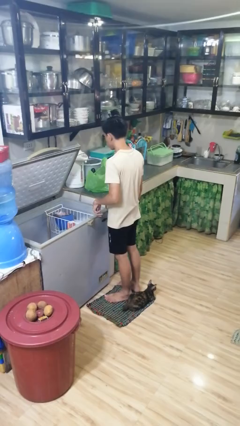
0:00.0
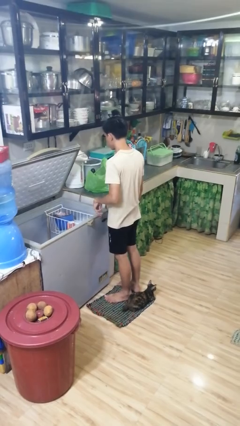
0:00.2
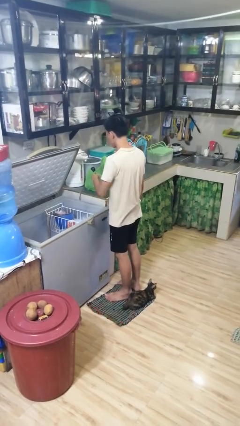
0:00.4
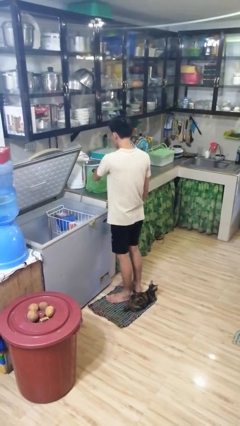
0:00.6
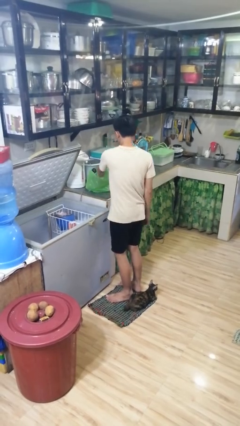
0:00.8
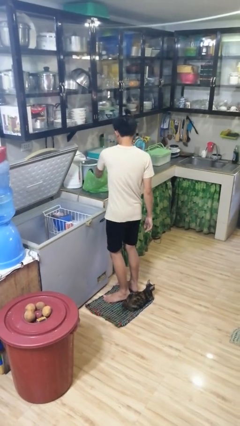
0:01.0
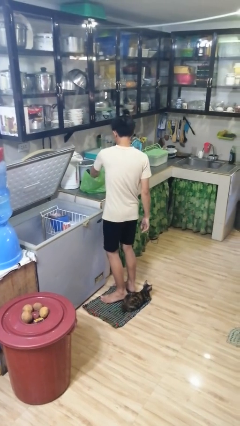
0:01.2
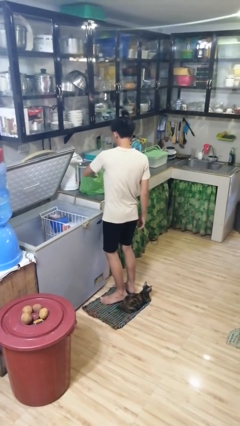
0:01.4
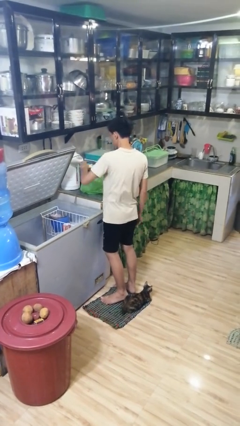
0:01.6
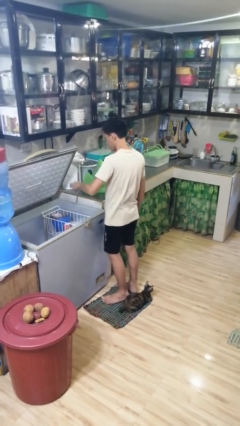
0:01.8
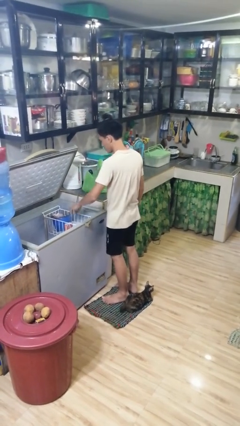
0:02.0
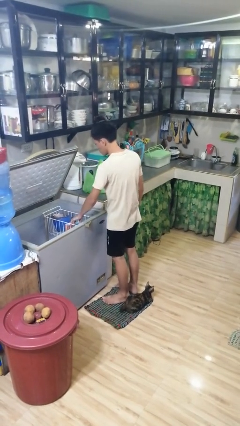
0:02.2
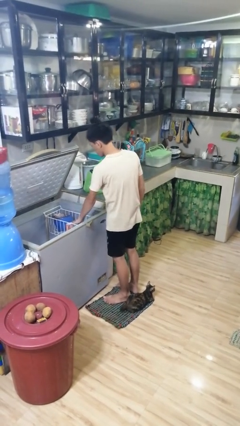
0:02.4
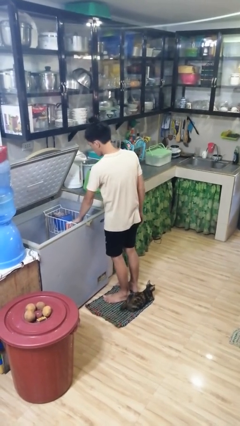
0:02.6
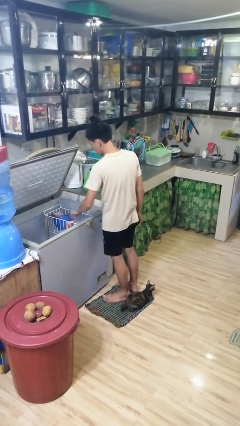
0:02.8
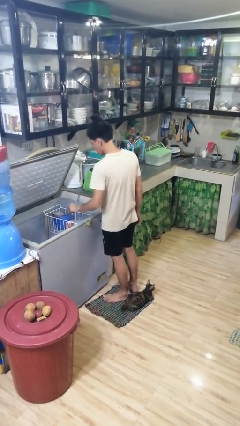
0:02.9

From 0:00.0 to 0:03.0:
person loads groceries into refrigerator

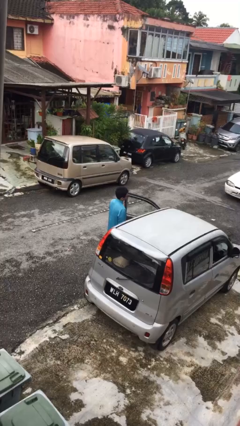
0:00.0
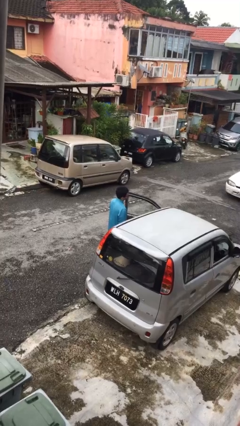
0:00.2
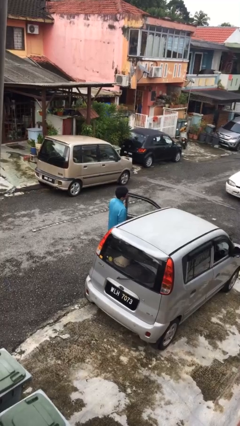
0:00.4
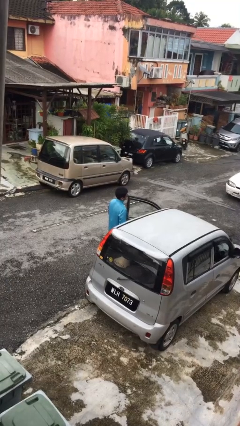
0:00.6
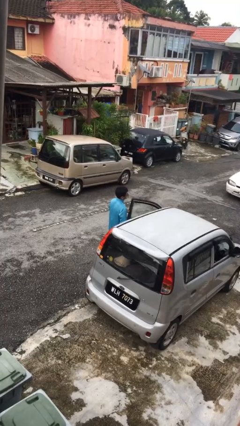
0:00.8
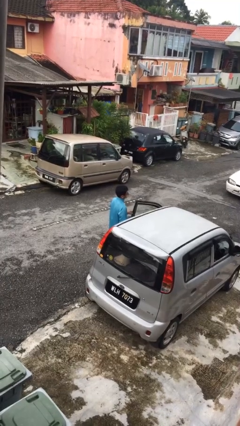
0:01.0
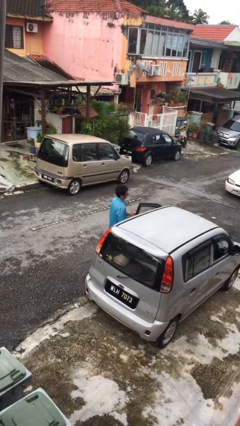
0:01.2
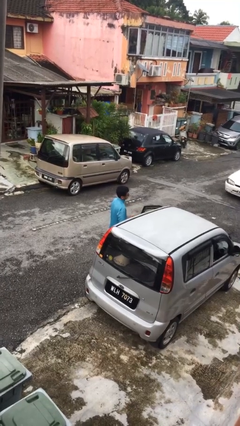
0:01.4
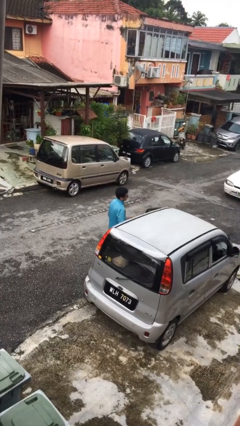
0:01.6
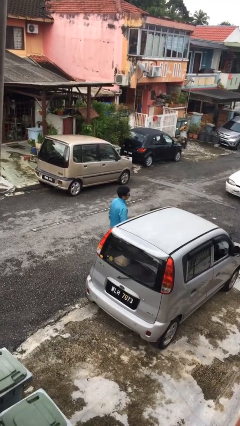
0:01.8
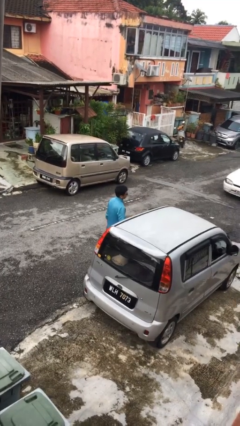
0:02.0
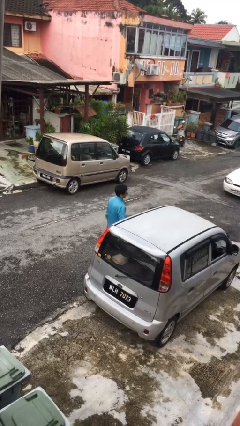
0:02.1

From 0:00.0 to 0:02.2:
person closes car door

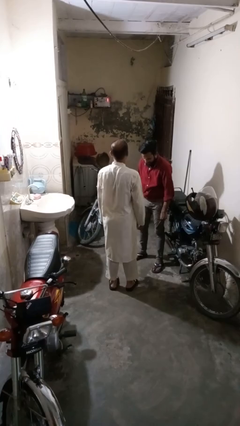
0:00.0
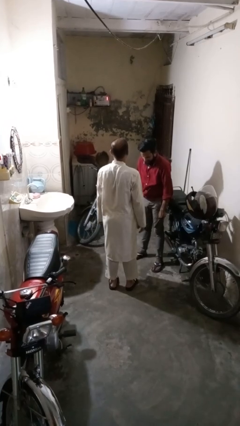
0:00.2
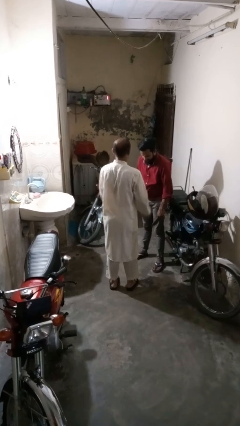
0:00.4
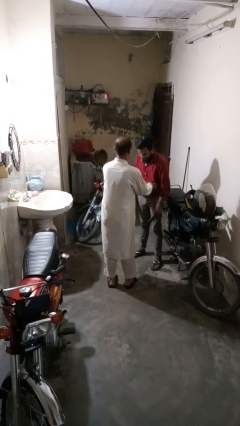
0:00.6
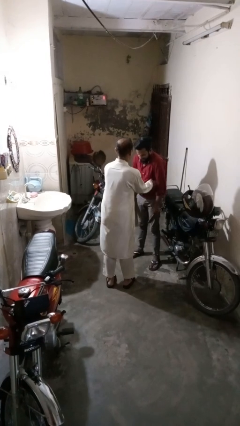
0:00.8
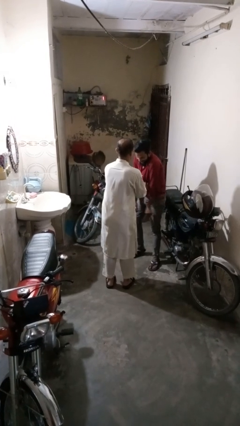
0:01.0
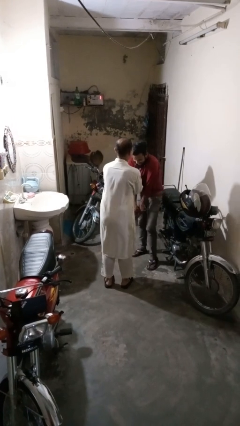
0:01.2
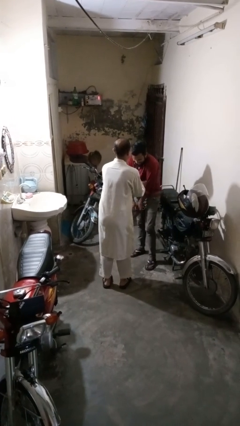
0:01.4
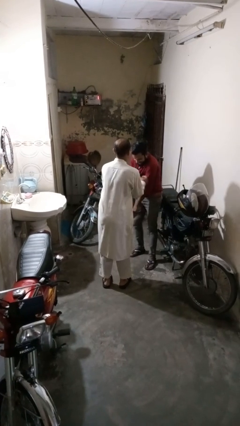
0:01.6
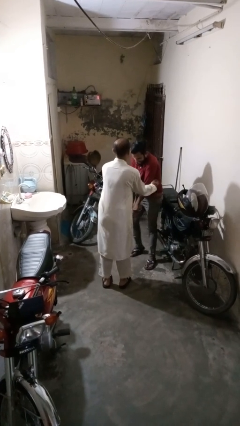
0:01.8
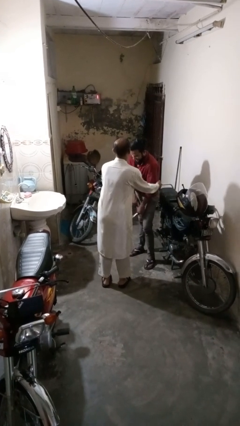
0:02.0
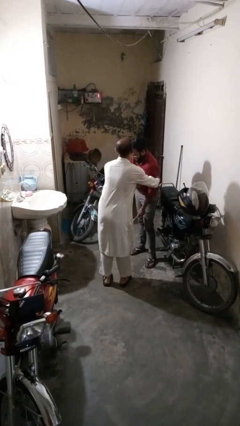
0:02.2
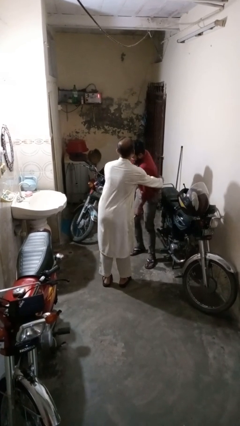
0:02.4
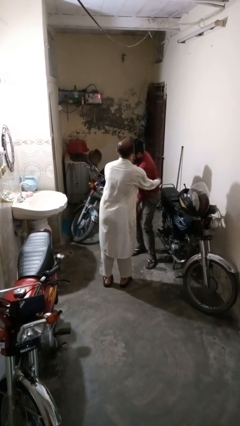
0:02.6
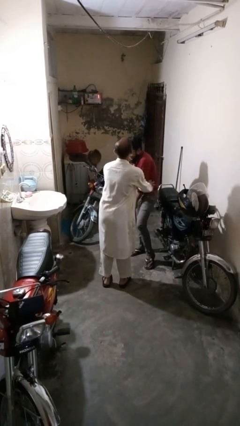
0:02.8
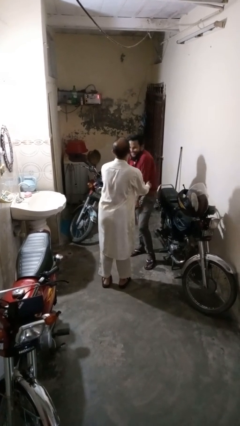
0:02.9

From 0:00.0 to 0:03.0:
person tickles person

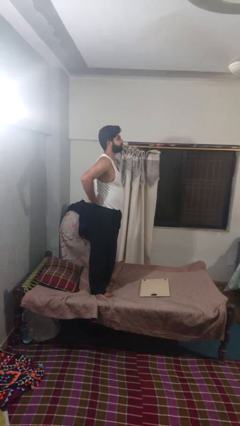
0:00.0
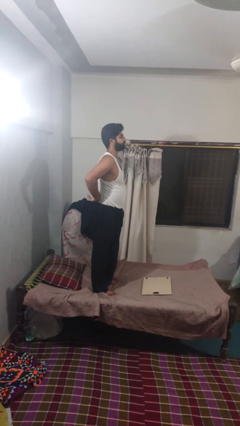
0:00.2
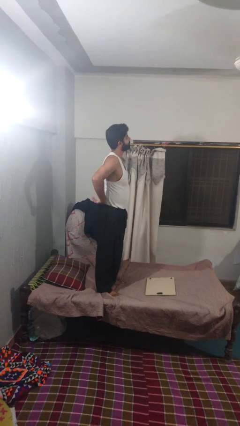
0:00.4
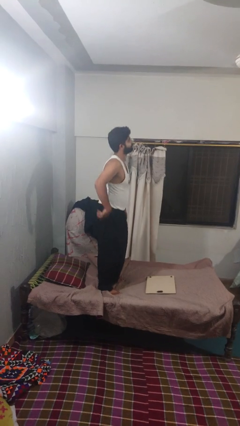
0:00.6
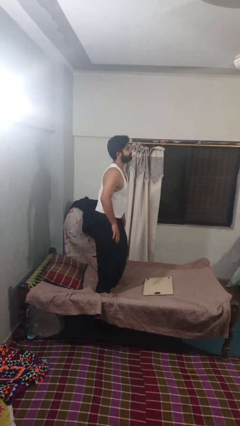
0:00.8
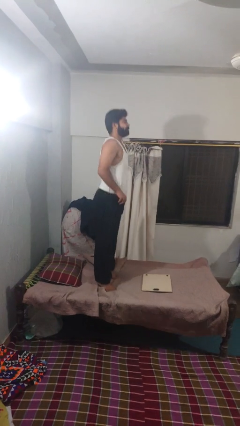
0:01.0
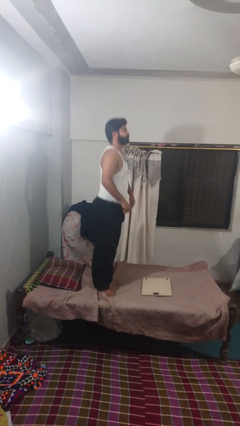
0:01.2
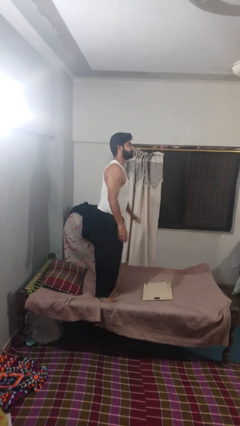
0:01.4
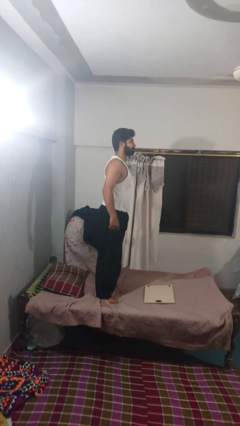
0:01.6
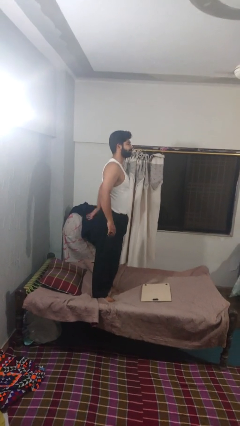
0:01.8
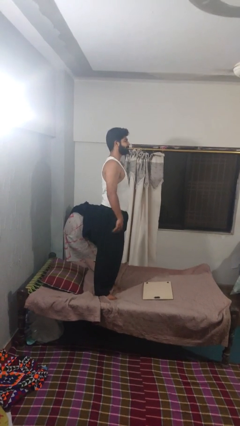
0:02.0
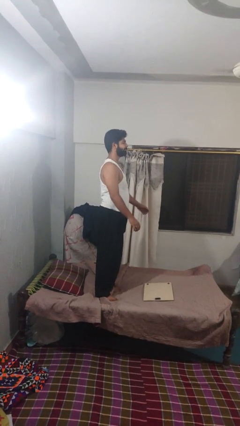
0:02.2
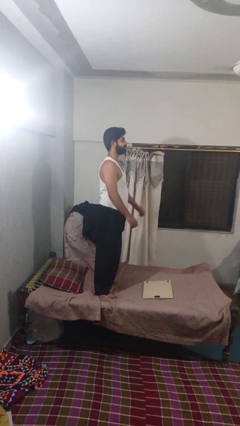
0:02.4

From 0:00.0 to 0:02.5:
person jumps on bed

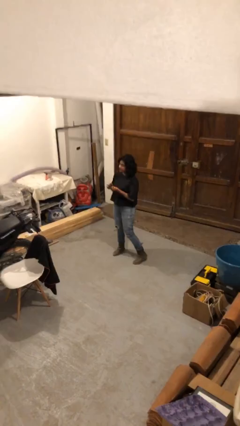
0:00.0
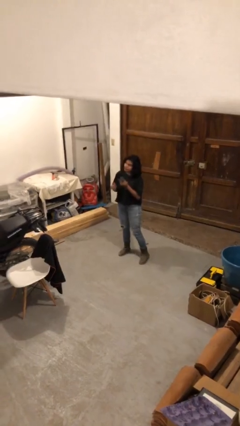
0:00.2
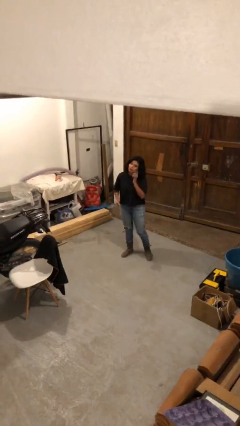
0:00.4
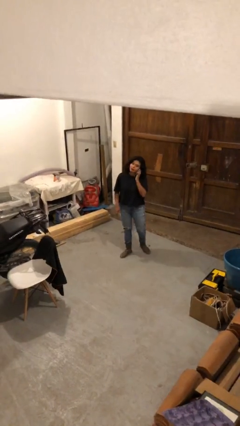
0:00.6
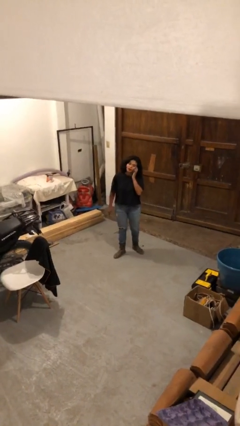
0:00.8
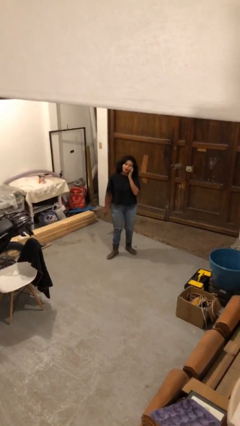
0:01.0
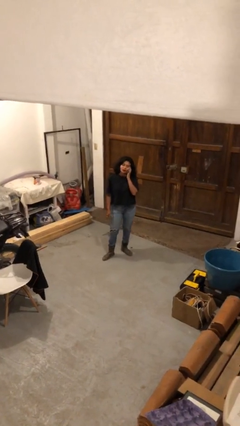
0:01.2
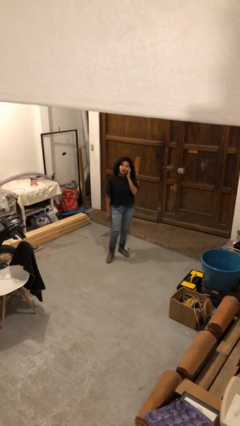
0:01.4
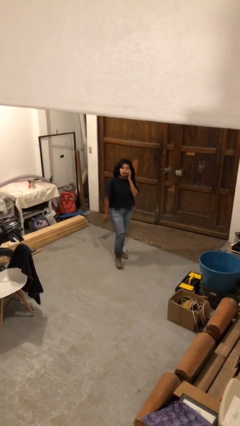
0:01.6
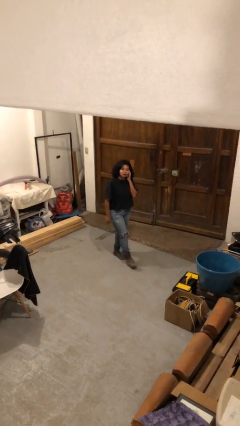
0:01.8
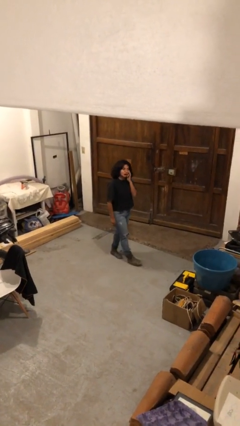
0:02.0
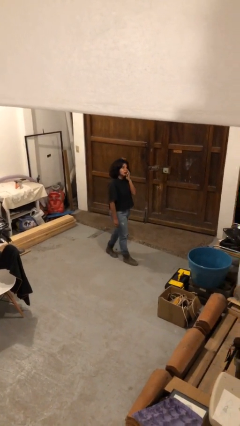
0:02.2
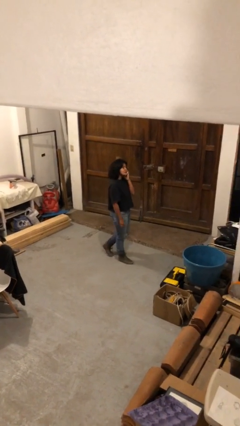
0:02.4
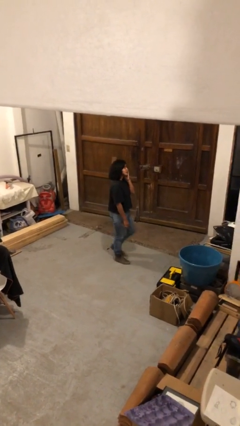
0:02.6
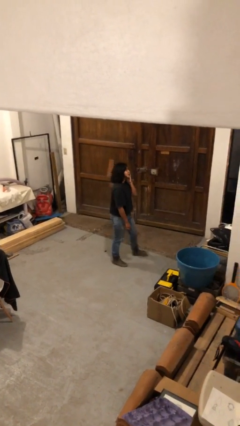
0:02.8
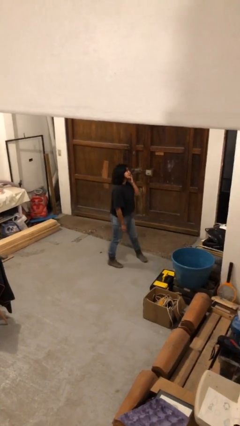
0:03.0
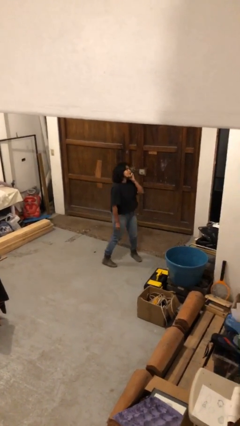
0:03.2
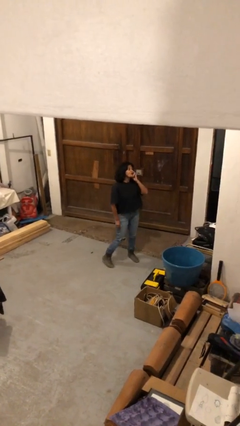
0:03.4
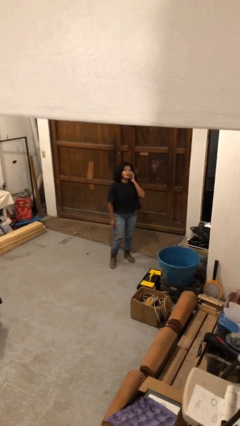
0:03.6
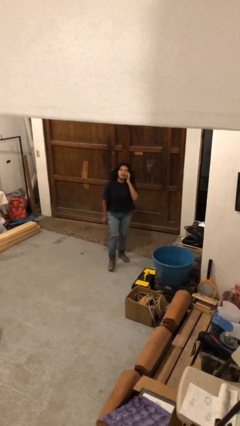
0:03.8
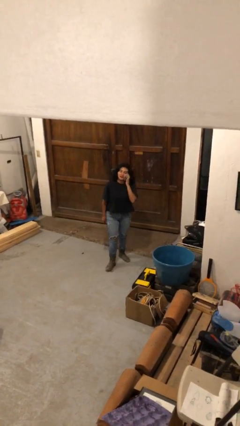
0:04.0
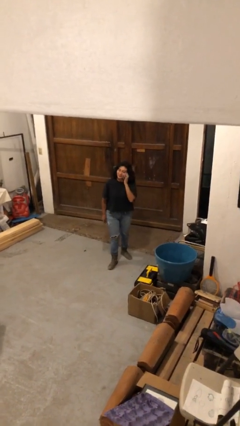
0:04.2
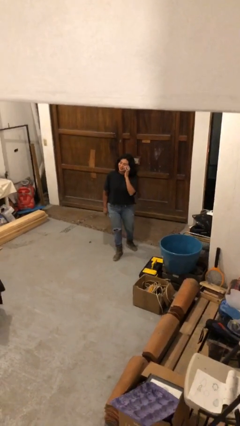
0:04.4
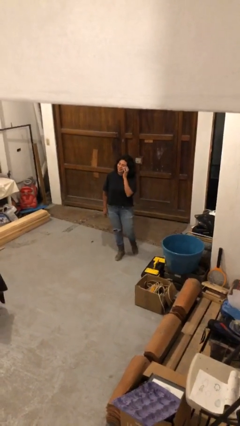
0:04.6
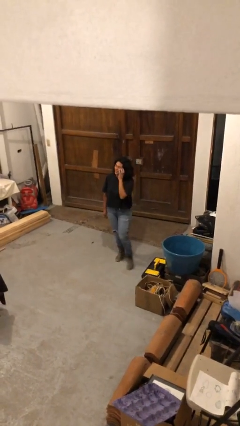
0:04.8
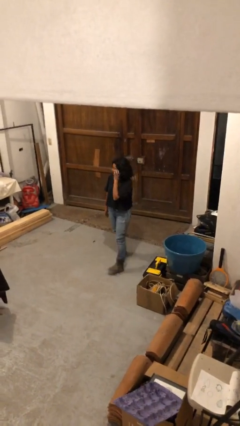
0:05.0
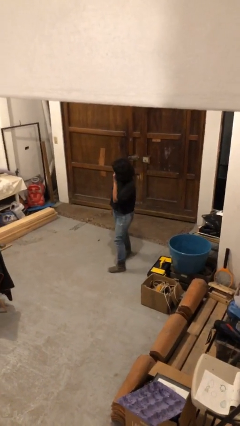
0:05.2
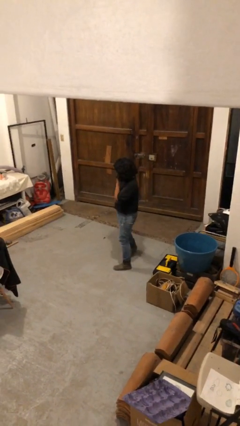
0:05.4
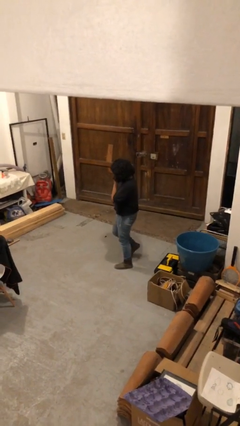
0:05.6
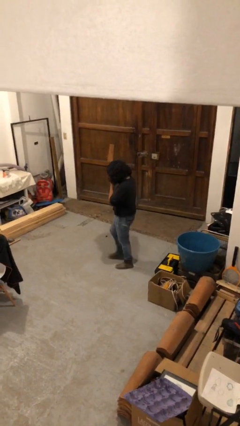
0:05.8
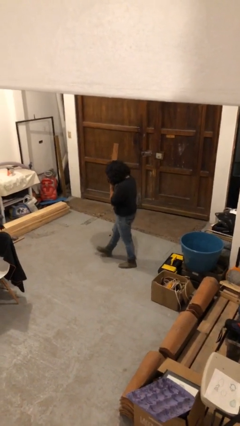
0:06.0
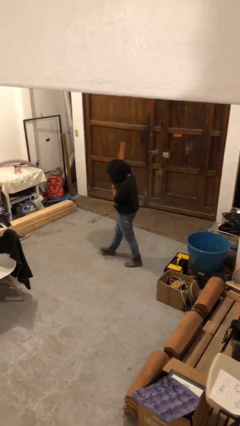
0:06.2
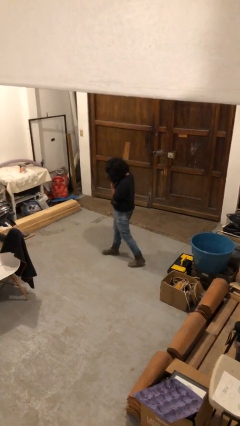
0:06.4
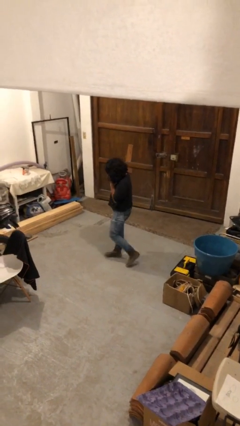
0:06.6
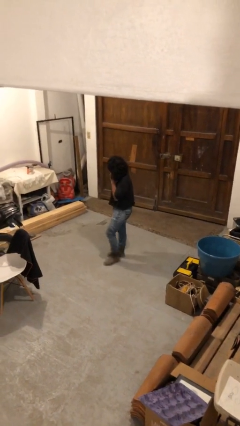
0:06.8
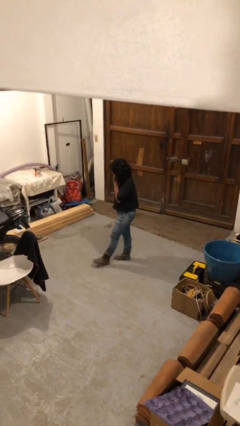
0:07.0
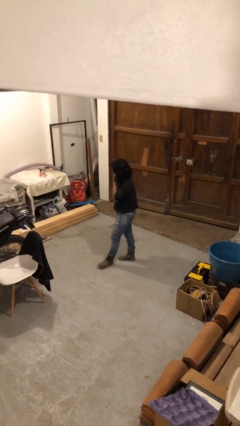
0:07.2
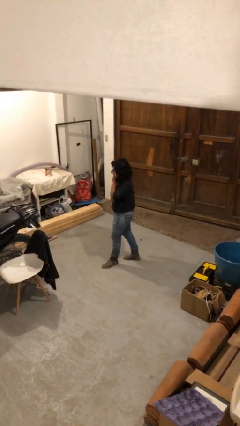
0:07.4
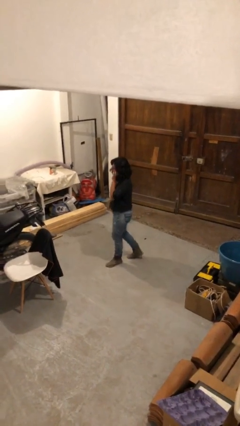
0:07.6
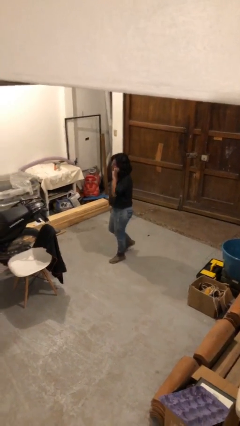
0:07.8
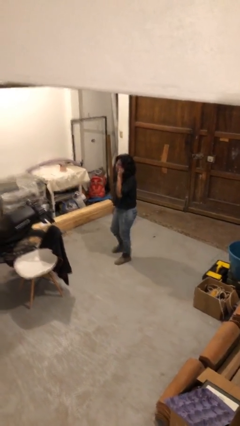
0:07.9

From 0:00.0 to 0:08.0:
person talks on phone
